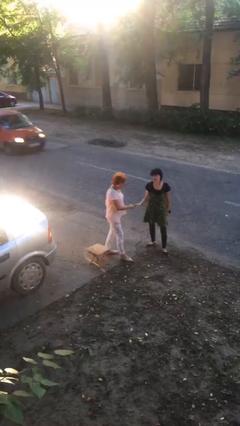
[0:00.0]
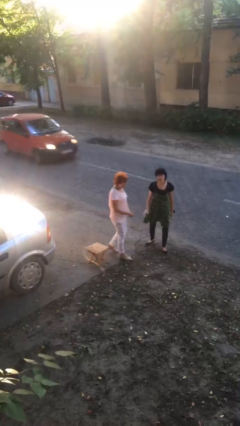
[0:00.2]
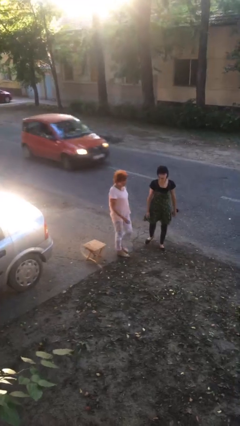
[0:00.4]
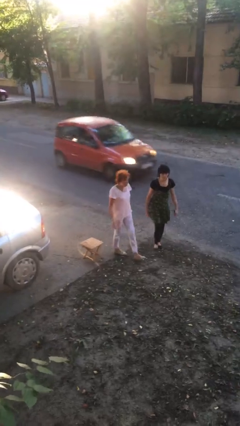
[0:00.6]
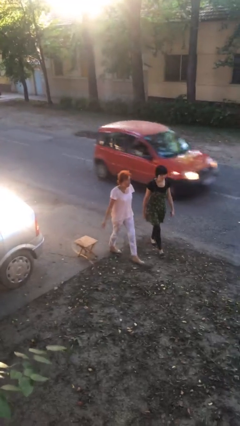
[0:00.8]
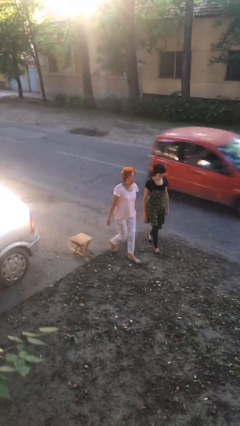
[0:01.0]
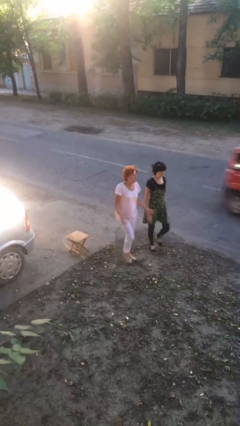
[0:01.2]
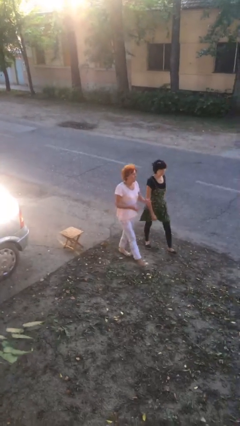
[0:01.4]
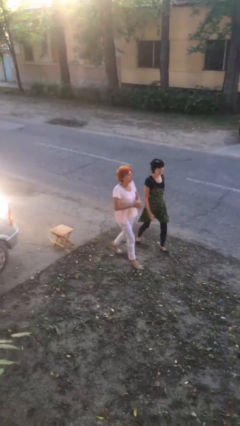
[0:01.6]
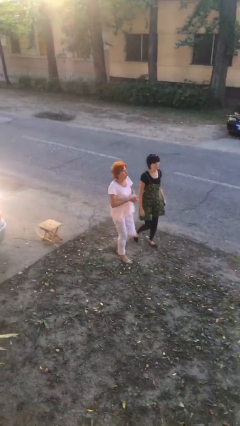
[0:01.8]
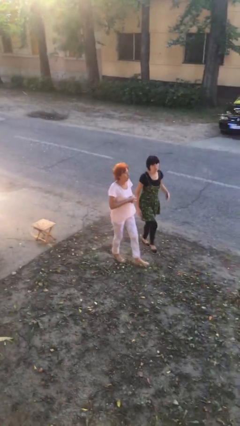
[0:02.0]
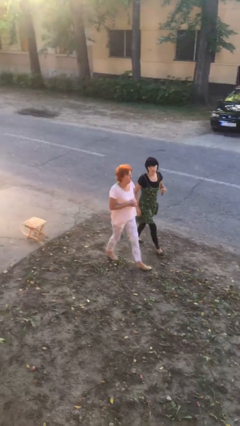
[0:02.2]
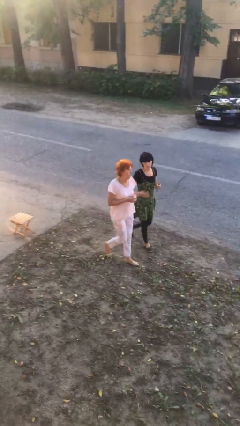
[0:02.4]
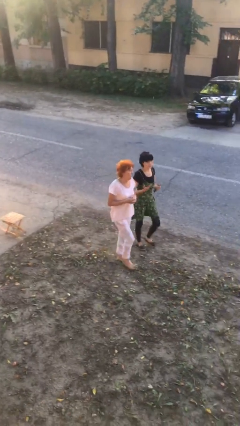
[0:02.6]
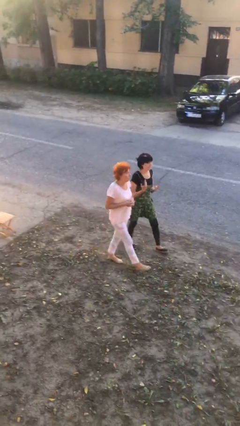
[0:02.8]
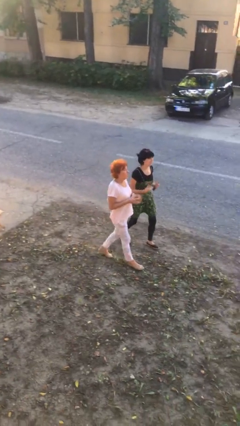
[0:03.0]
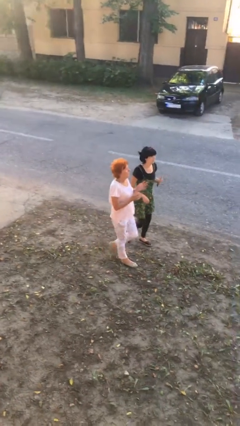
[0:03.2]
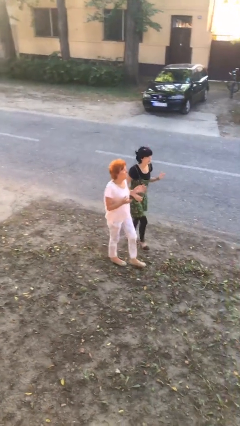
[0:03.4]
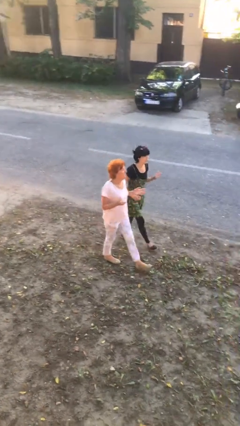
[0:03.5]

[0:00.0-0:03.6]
person talks to person

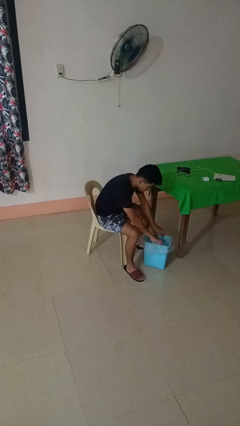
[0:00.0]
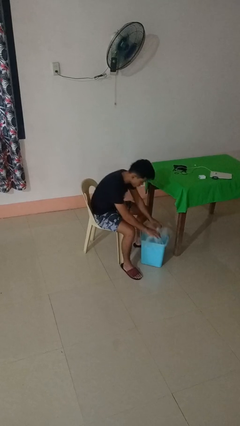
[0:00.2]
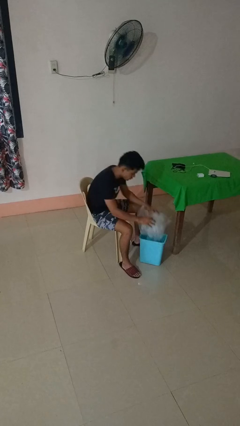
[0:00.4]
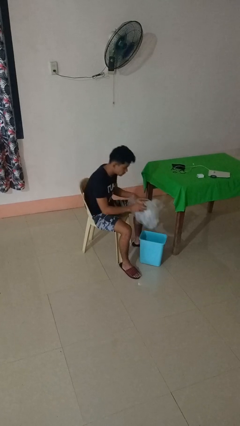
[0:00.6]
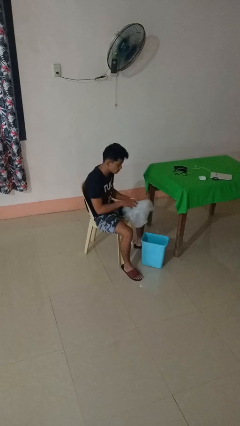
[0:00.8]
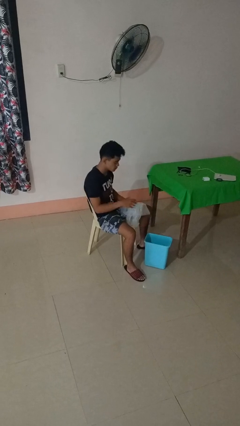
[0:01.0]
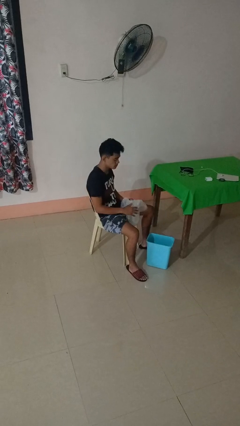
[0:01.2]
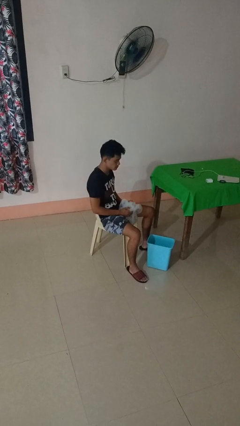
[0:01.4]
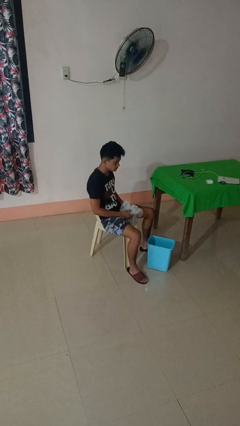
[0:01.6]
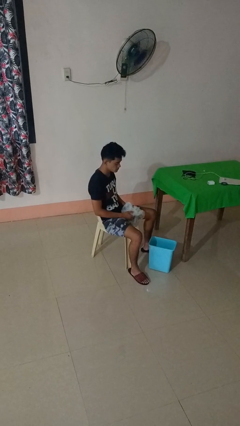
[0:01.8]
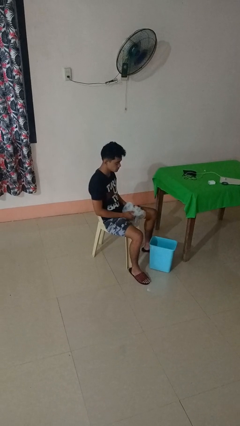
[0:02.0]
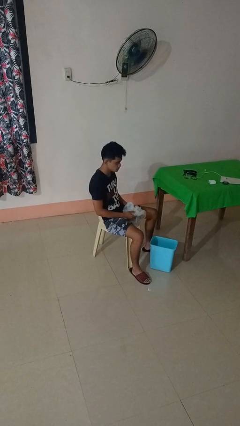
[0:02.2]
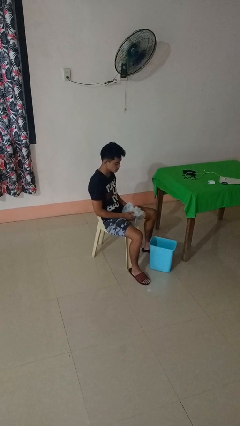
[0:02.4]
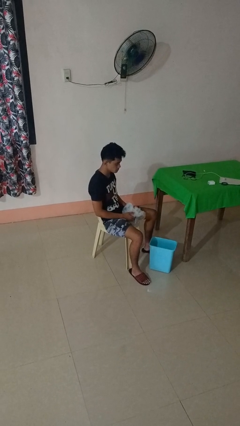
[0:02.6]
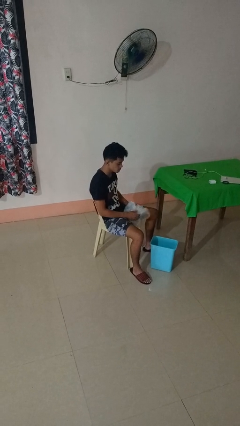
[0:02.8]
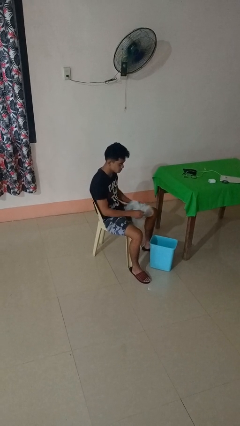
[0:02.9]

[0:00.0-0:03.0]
person removes trashbag from trashcan

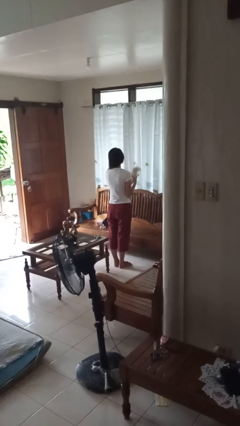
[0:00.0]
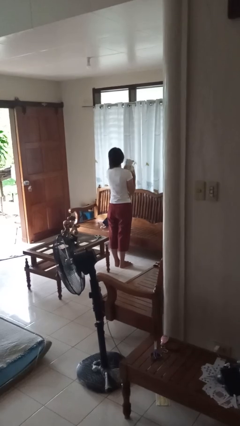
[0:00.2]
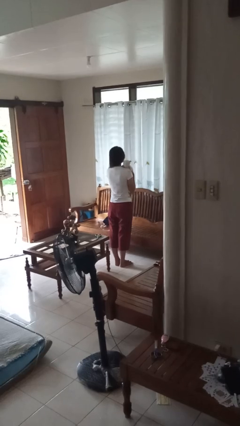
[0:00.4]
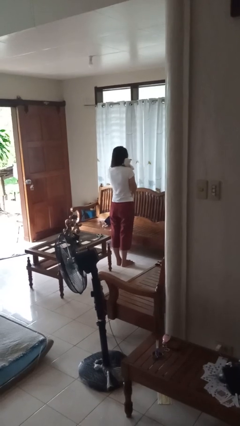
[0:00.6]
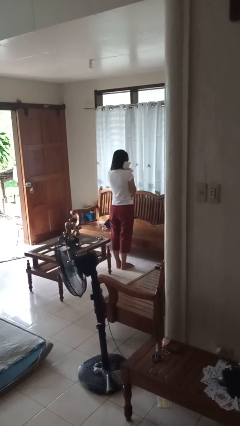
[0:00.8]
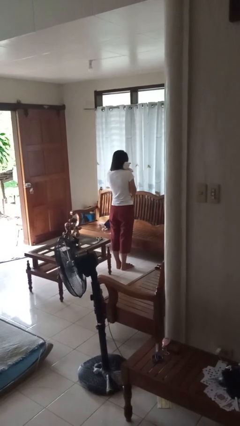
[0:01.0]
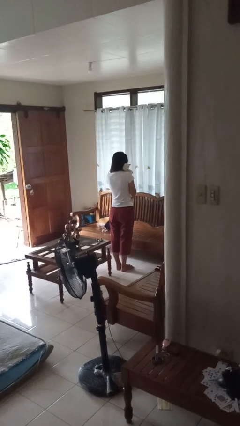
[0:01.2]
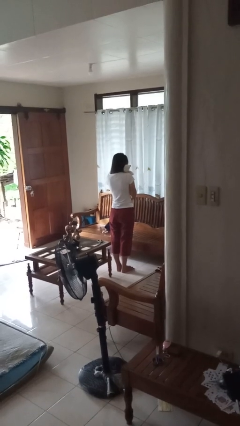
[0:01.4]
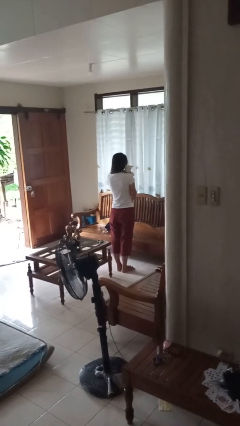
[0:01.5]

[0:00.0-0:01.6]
person hugs stuffed animal

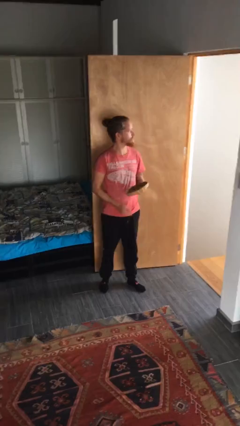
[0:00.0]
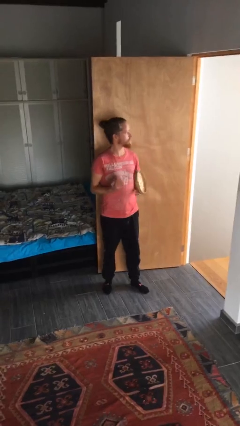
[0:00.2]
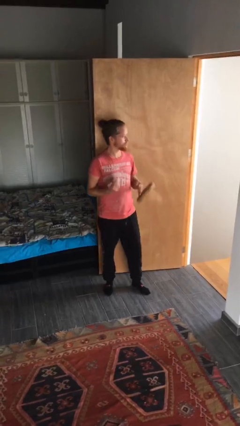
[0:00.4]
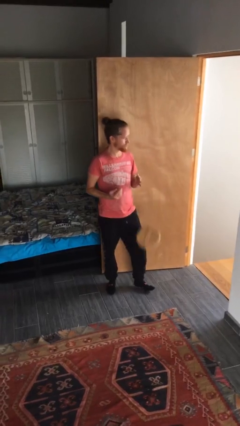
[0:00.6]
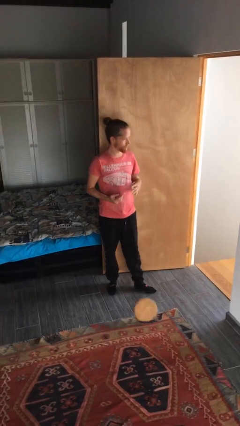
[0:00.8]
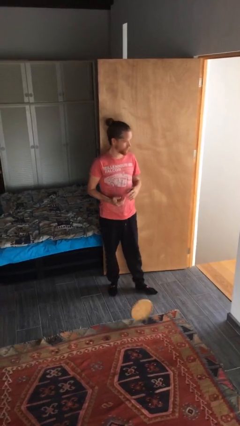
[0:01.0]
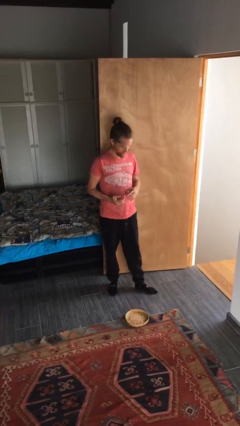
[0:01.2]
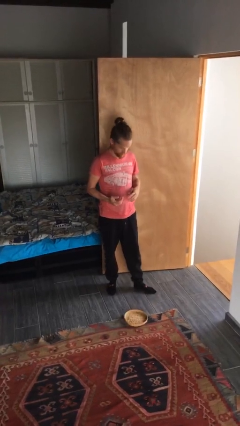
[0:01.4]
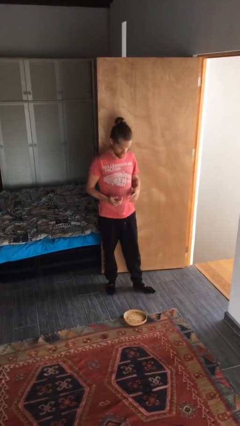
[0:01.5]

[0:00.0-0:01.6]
person drops object

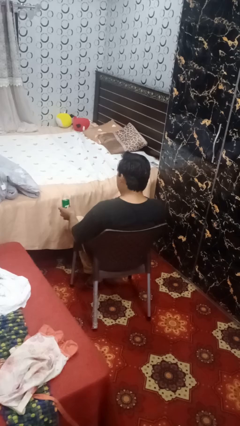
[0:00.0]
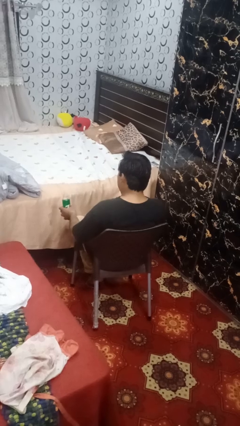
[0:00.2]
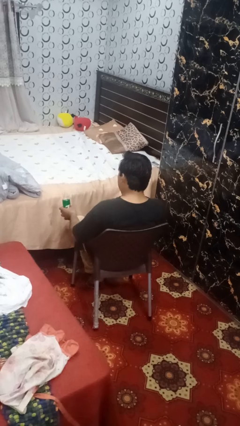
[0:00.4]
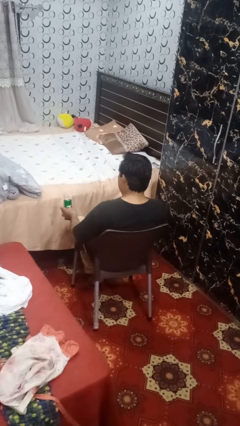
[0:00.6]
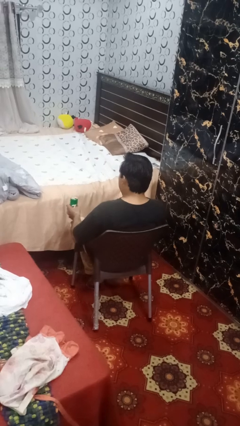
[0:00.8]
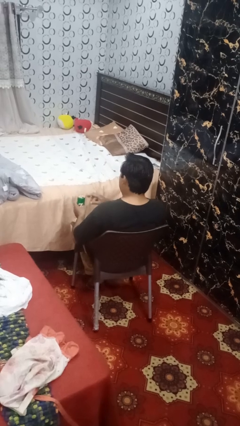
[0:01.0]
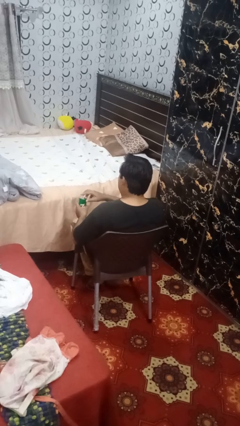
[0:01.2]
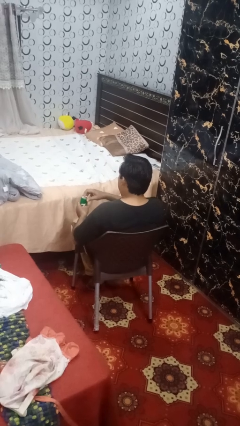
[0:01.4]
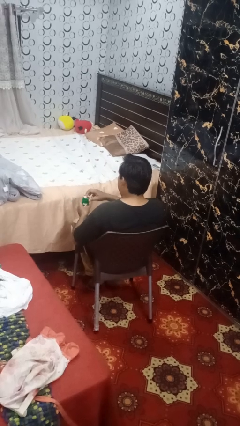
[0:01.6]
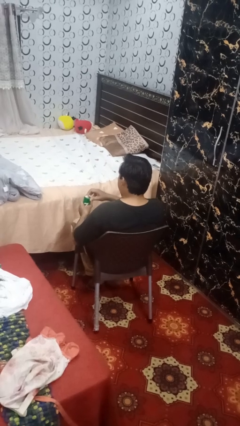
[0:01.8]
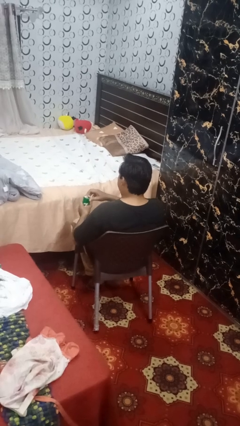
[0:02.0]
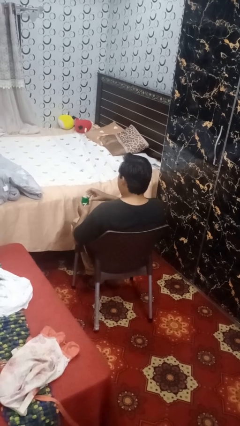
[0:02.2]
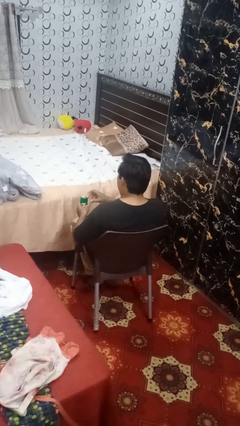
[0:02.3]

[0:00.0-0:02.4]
person opens beverage can

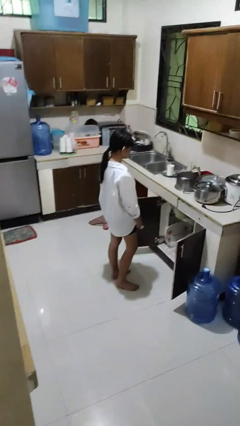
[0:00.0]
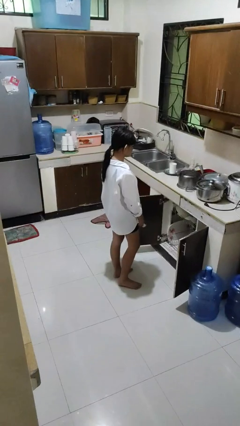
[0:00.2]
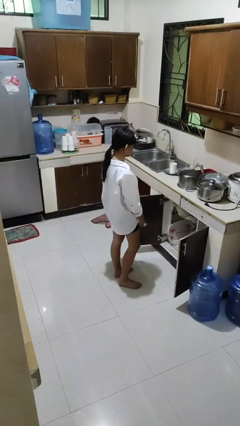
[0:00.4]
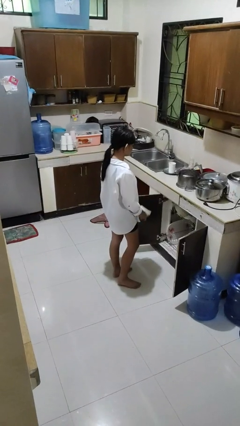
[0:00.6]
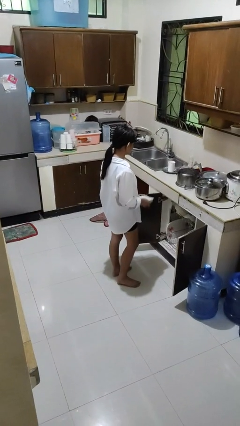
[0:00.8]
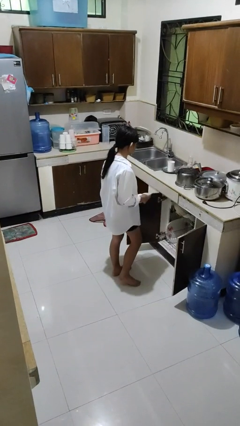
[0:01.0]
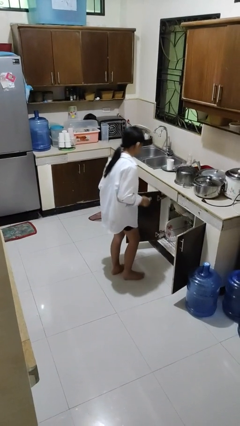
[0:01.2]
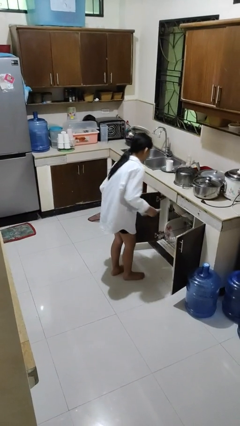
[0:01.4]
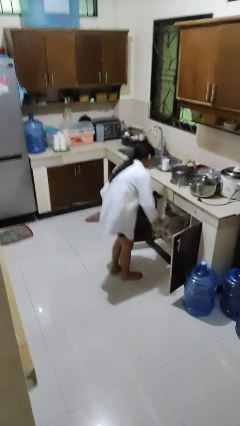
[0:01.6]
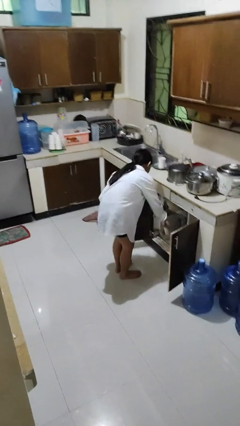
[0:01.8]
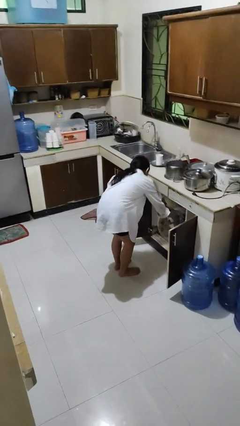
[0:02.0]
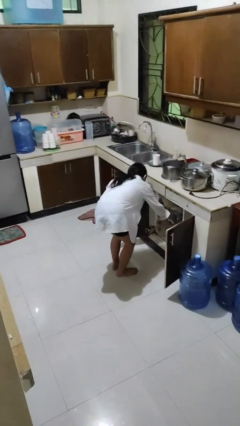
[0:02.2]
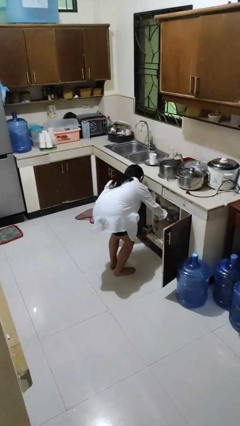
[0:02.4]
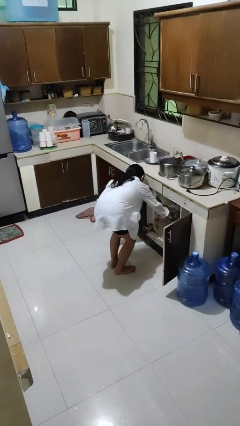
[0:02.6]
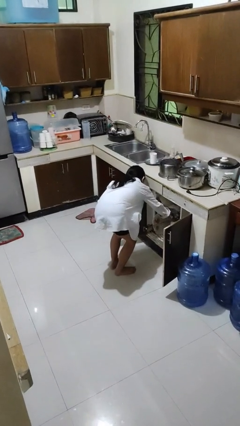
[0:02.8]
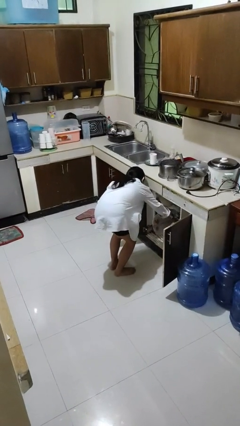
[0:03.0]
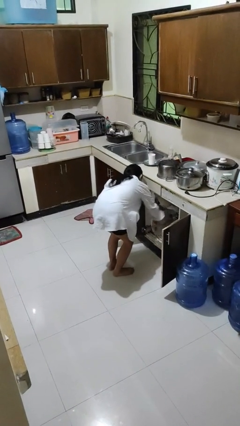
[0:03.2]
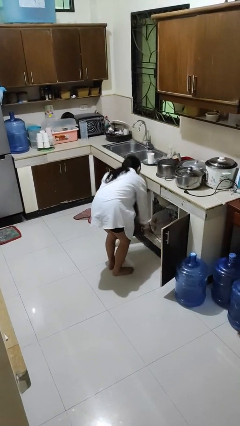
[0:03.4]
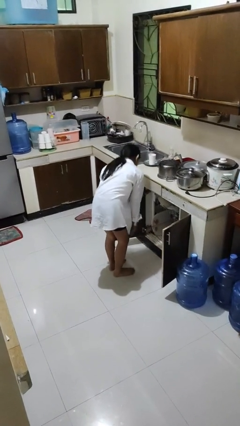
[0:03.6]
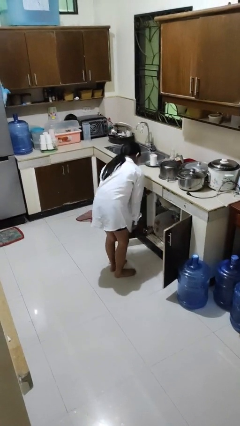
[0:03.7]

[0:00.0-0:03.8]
person loads dishwasher

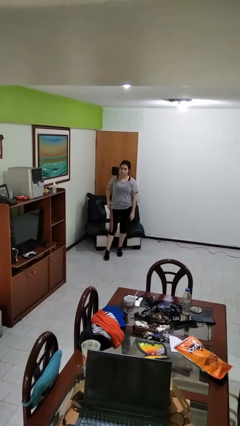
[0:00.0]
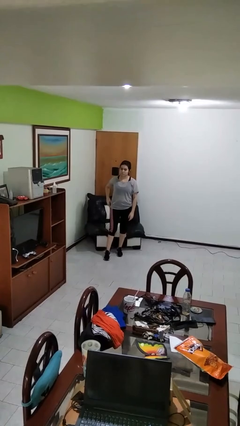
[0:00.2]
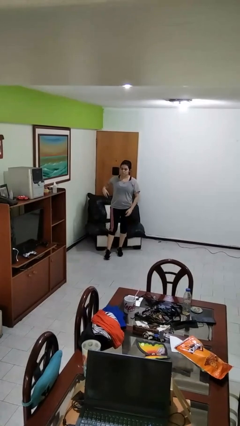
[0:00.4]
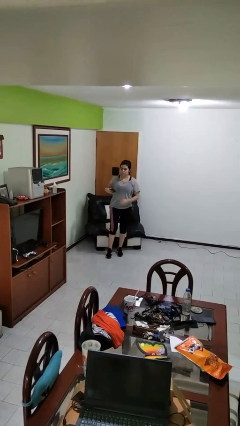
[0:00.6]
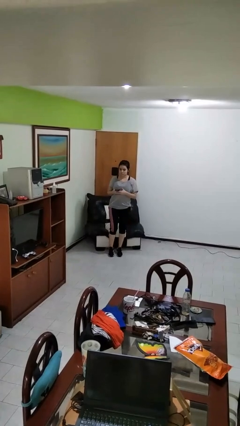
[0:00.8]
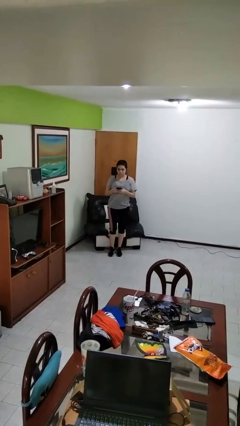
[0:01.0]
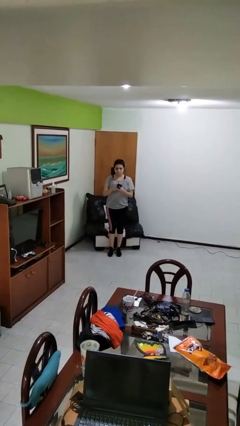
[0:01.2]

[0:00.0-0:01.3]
person takes phone from pocket
